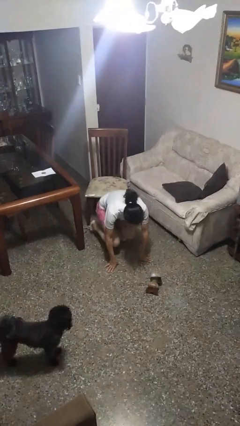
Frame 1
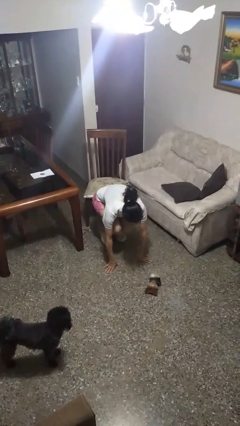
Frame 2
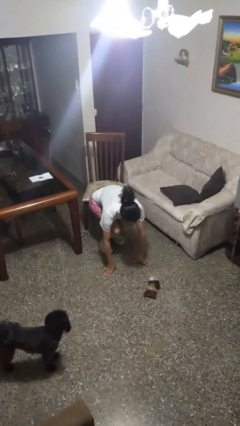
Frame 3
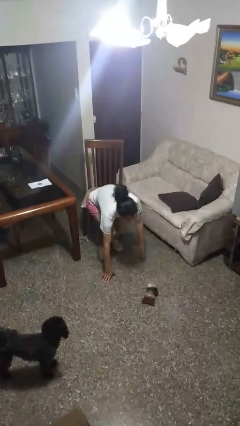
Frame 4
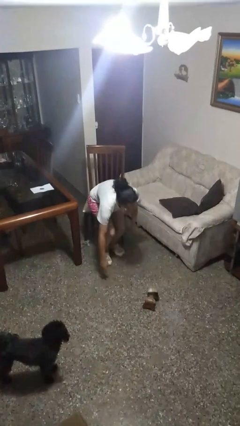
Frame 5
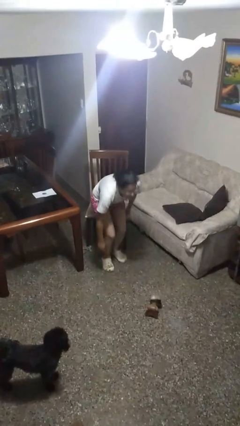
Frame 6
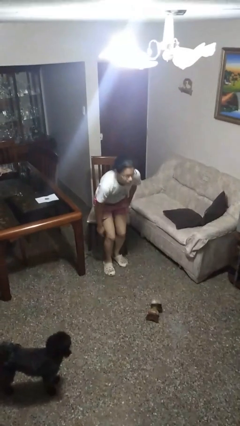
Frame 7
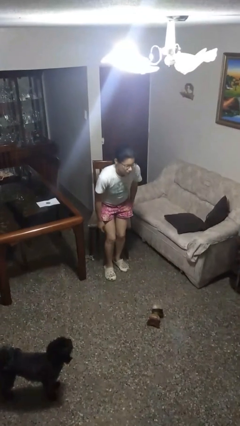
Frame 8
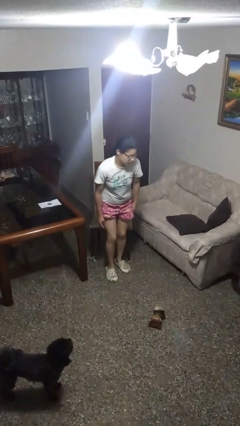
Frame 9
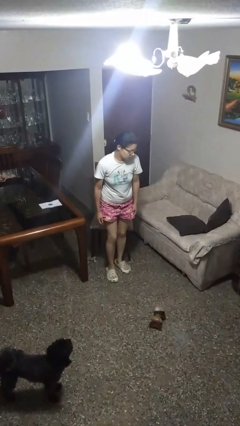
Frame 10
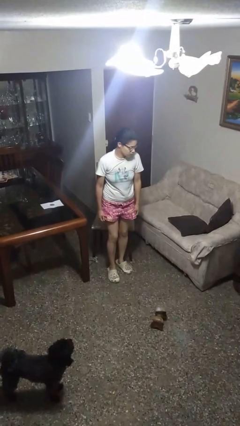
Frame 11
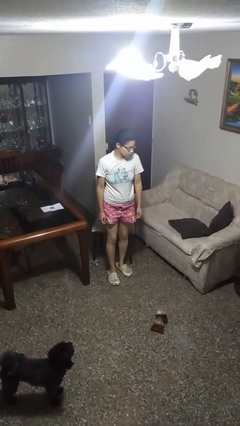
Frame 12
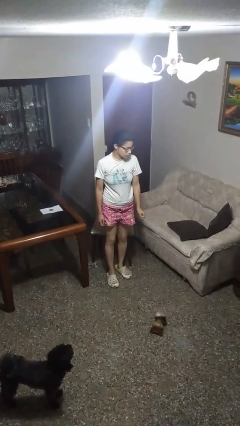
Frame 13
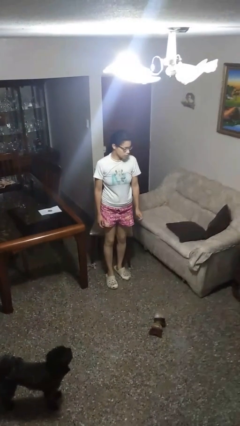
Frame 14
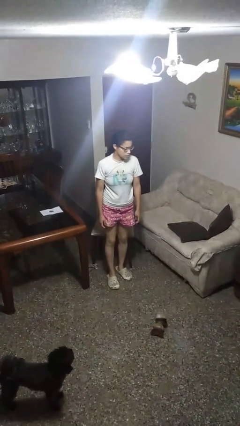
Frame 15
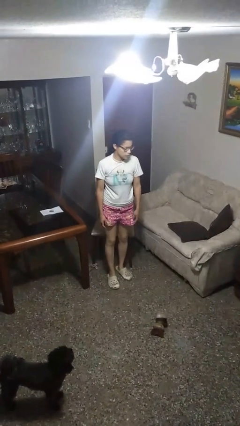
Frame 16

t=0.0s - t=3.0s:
person stands up from floor

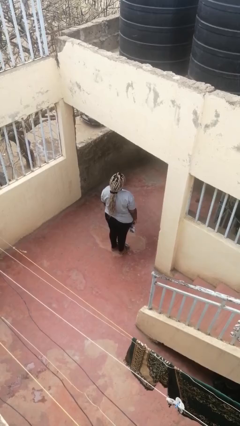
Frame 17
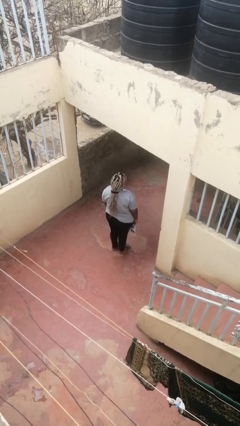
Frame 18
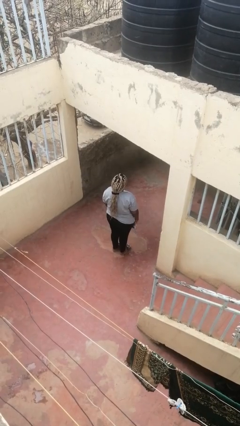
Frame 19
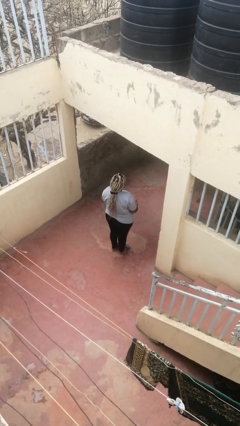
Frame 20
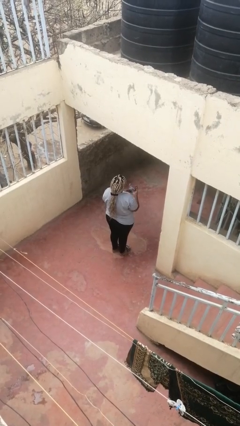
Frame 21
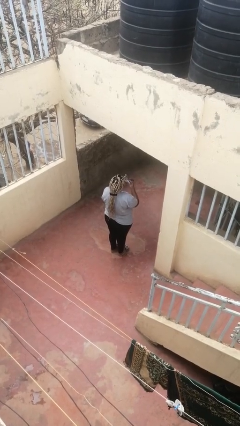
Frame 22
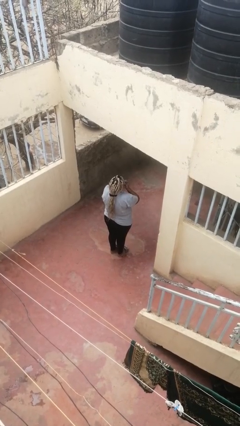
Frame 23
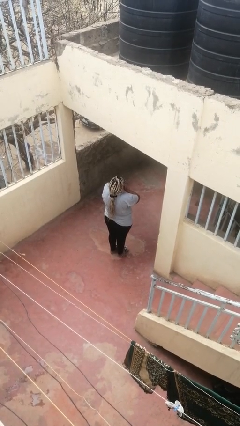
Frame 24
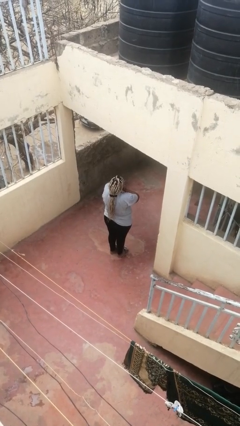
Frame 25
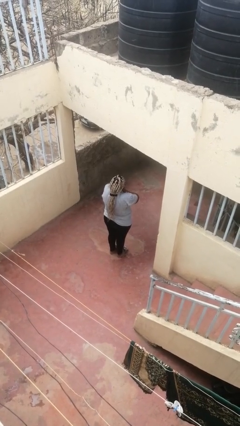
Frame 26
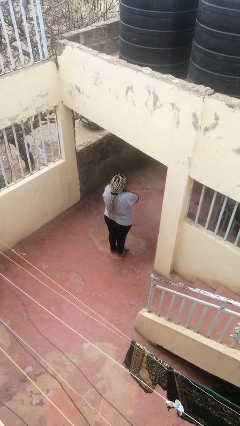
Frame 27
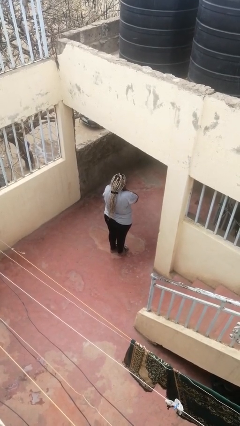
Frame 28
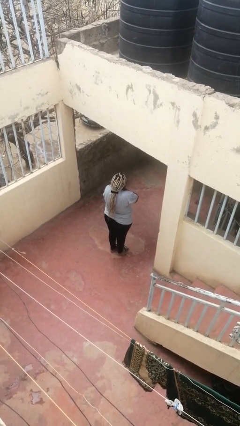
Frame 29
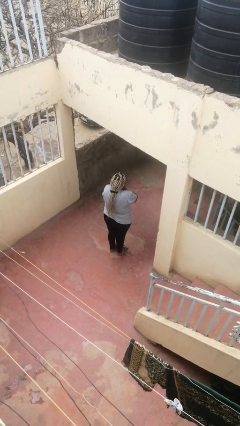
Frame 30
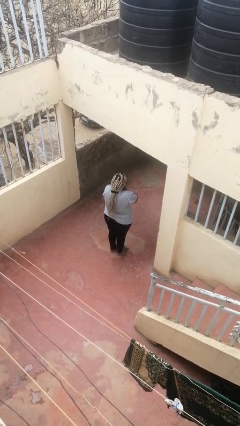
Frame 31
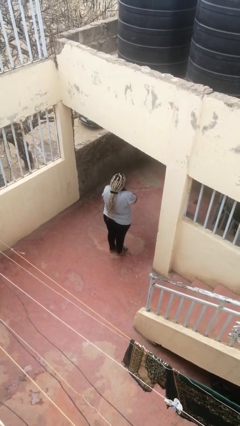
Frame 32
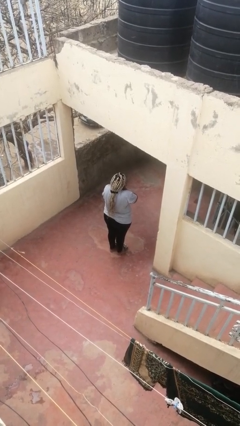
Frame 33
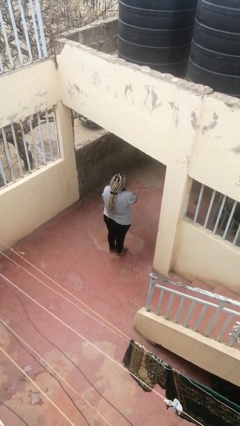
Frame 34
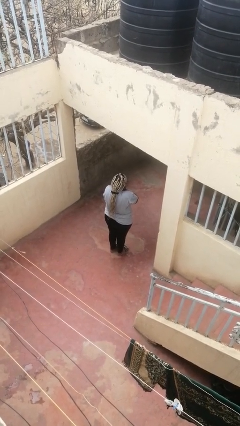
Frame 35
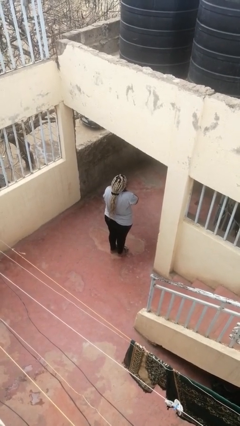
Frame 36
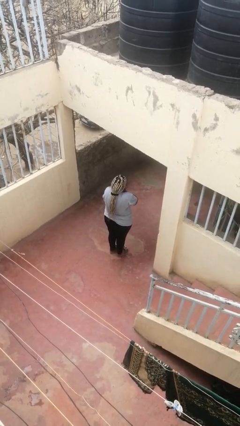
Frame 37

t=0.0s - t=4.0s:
person blows nose

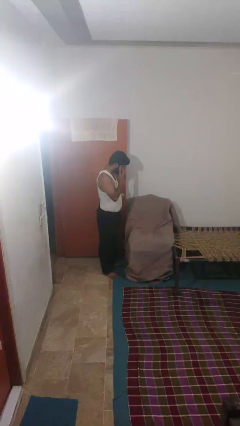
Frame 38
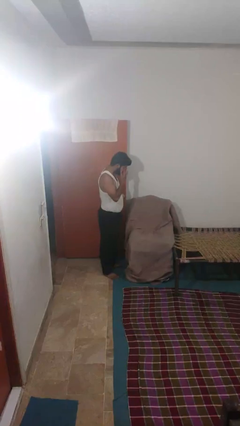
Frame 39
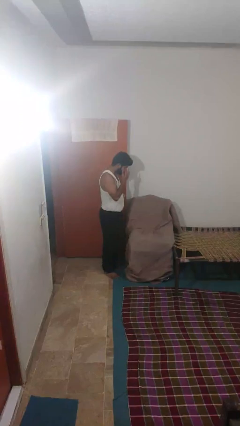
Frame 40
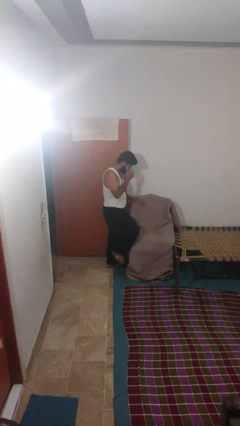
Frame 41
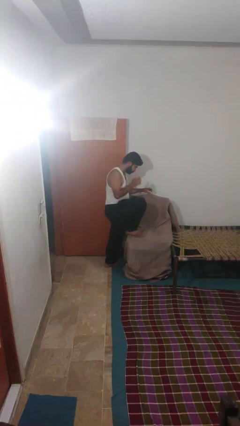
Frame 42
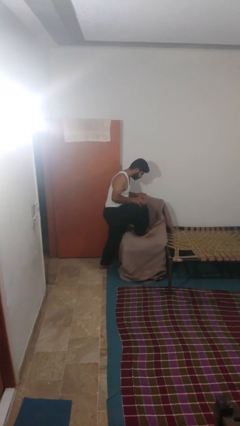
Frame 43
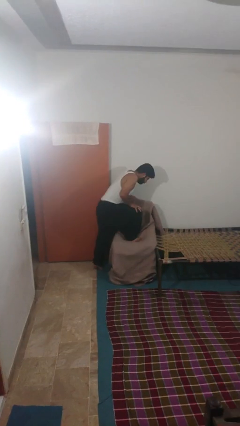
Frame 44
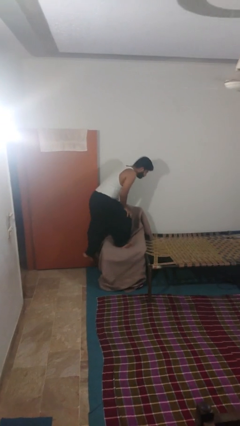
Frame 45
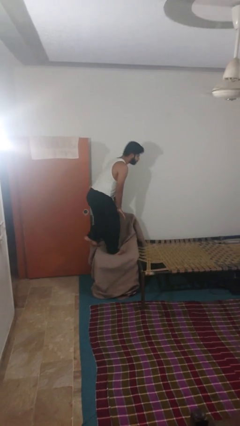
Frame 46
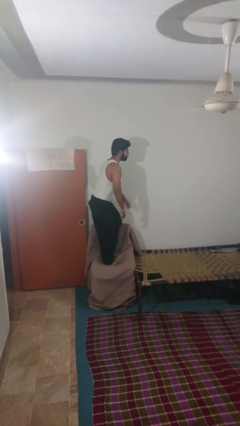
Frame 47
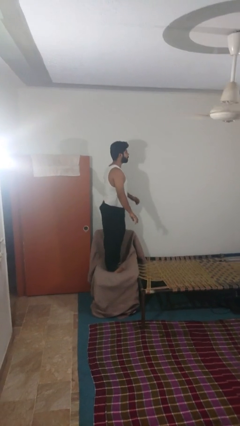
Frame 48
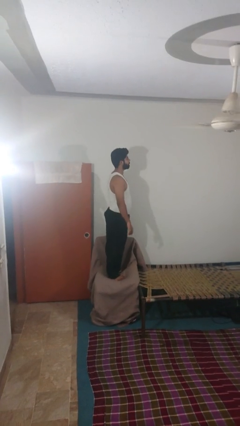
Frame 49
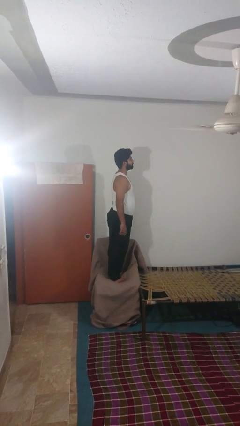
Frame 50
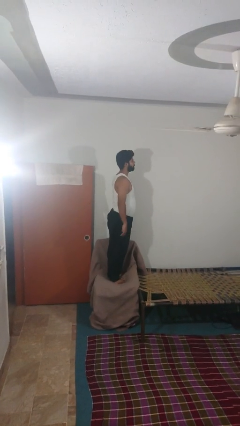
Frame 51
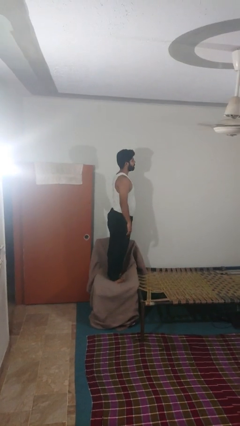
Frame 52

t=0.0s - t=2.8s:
person climbs on couch

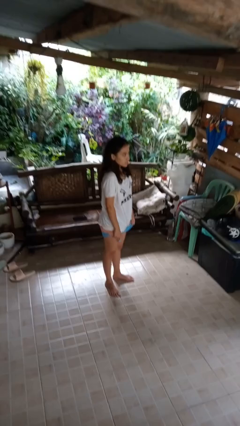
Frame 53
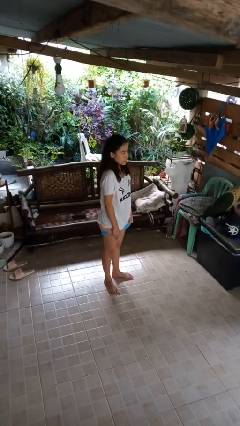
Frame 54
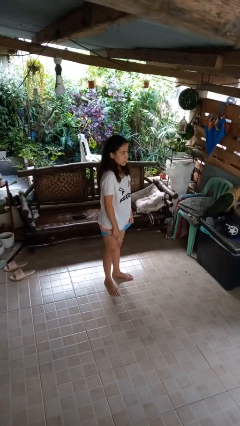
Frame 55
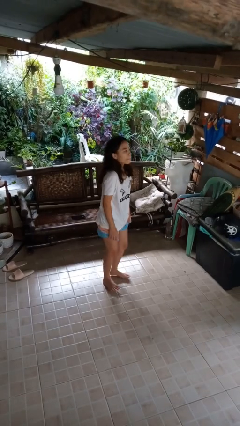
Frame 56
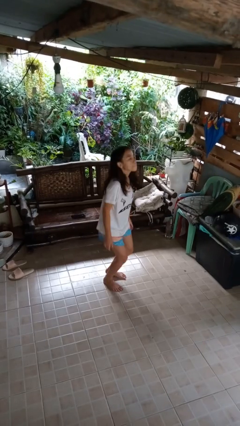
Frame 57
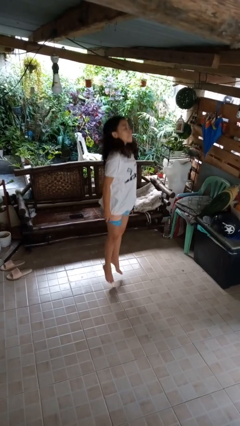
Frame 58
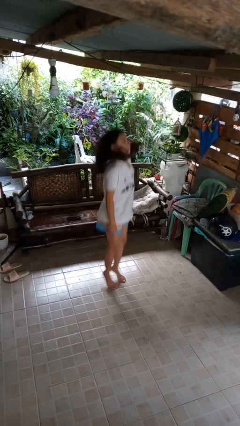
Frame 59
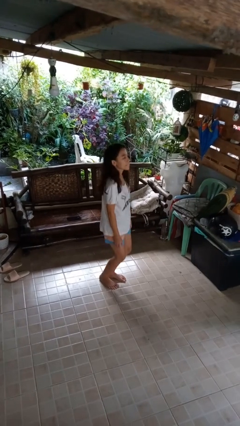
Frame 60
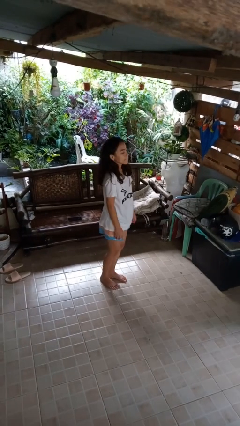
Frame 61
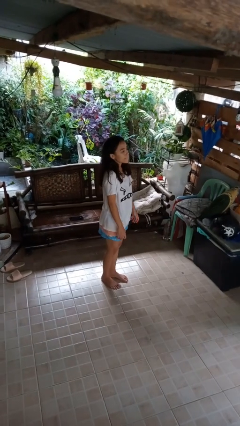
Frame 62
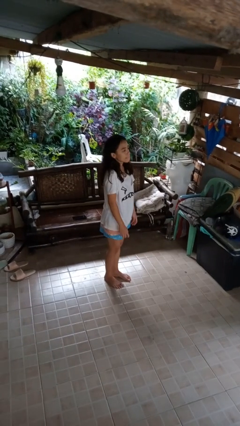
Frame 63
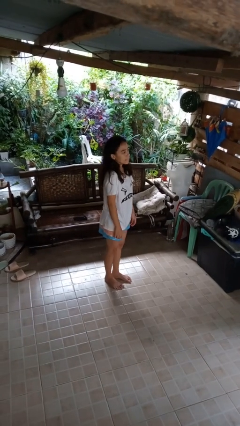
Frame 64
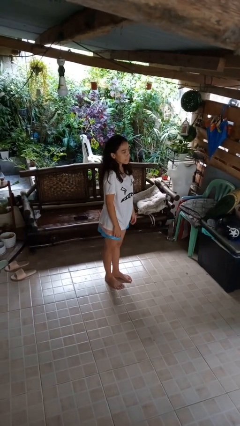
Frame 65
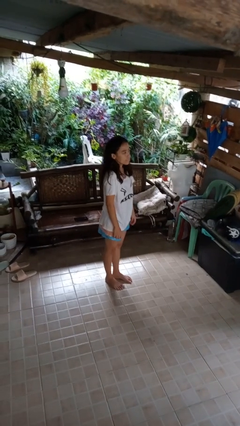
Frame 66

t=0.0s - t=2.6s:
person jumps

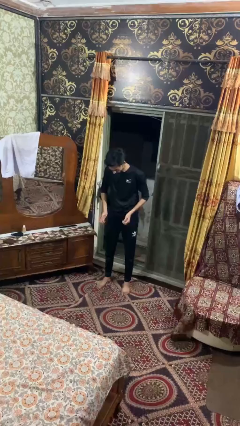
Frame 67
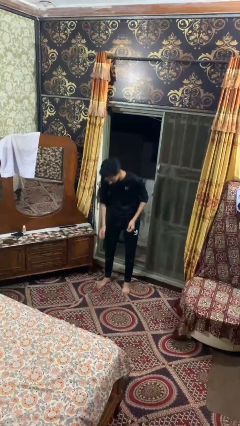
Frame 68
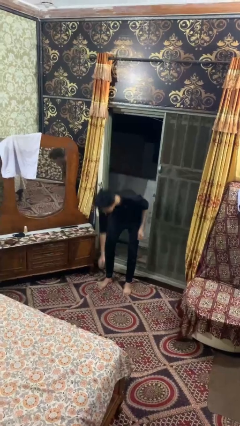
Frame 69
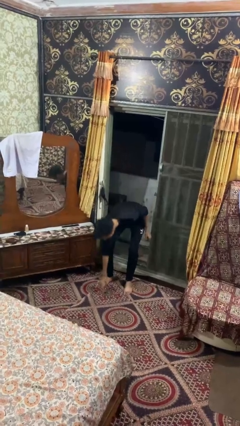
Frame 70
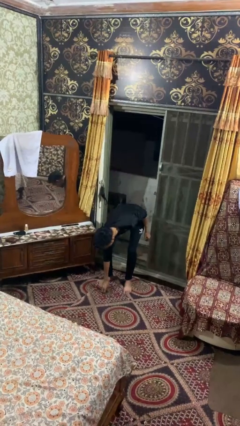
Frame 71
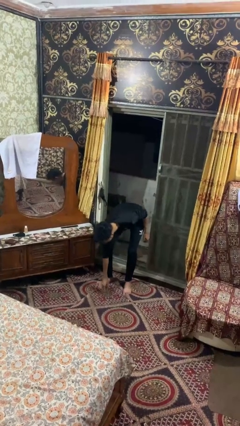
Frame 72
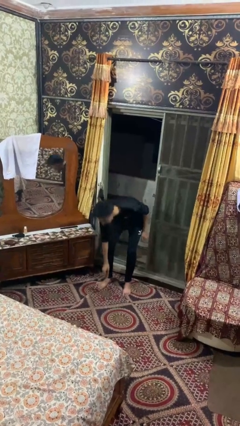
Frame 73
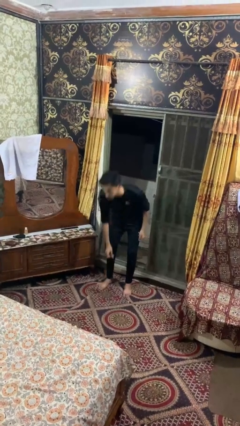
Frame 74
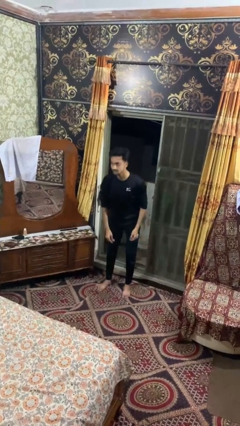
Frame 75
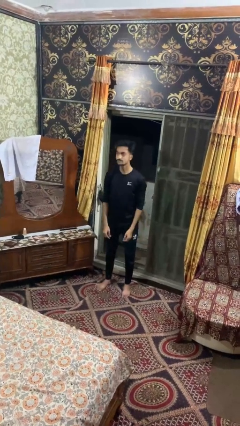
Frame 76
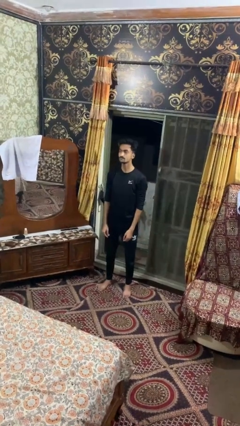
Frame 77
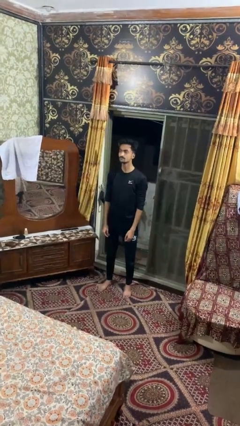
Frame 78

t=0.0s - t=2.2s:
person picks up object from floor

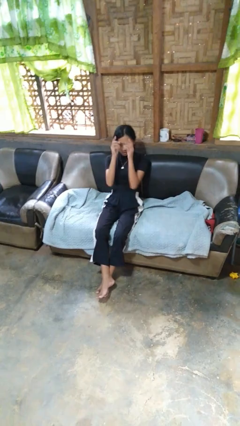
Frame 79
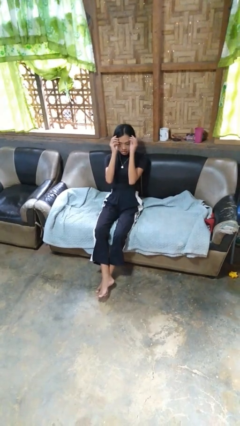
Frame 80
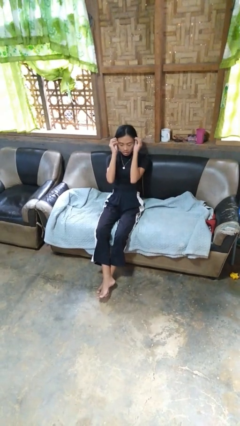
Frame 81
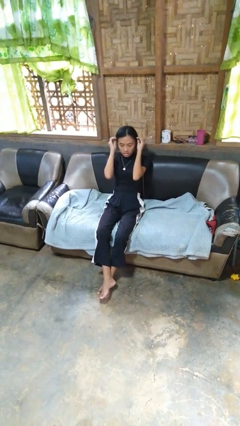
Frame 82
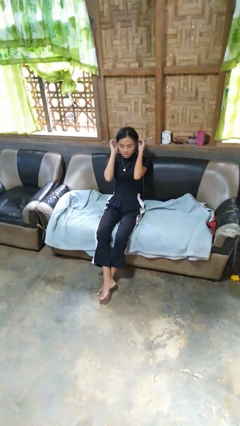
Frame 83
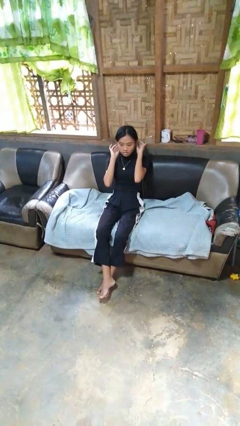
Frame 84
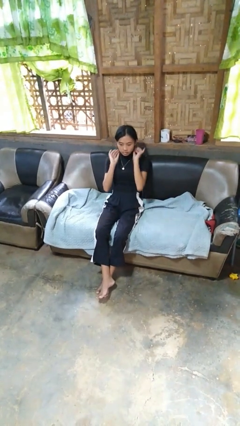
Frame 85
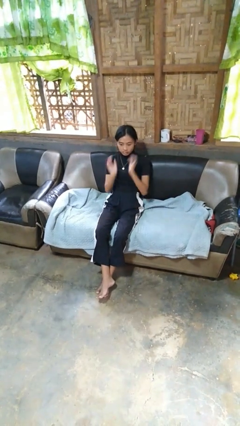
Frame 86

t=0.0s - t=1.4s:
person strokes hair

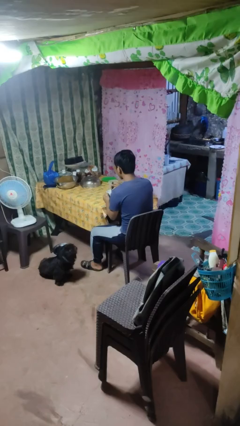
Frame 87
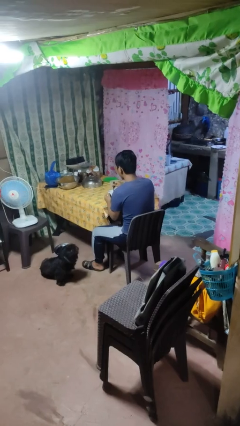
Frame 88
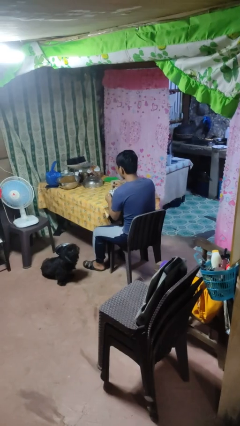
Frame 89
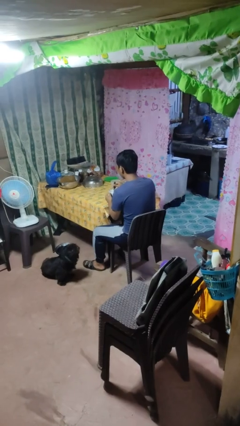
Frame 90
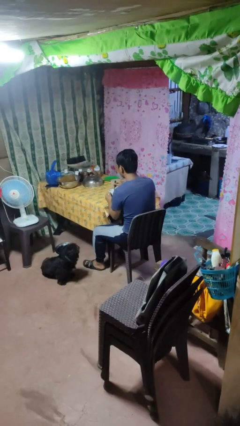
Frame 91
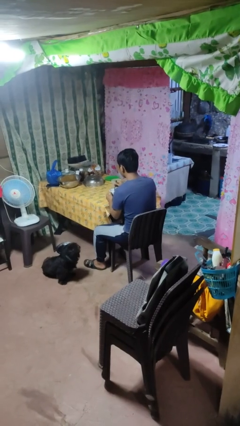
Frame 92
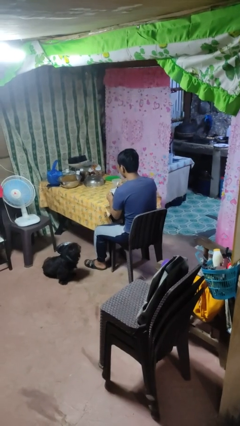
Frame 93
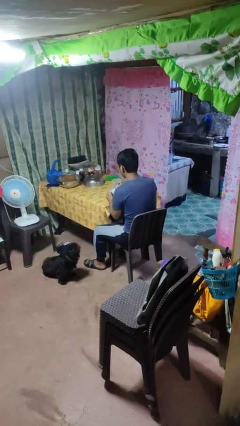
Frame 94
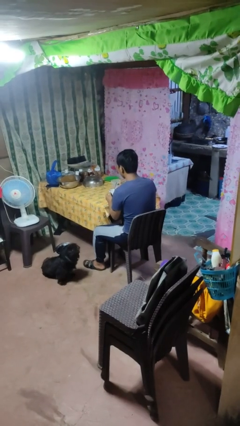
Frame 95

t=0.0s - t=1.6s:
person stirs mug
